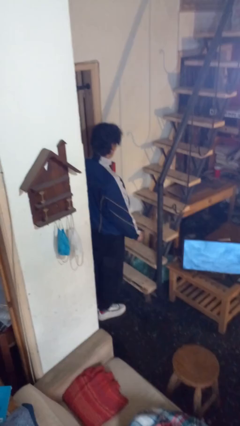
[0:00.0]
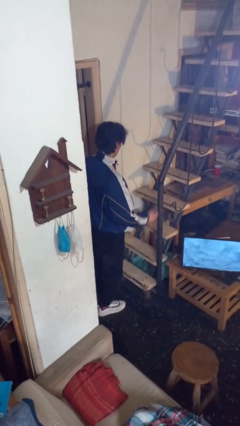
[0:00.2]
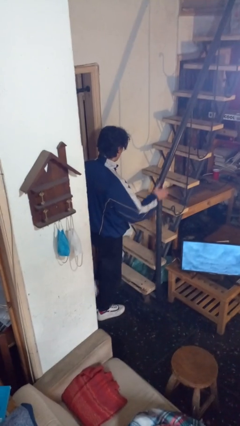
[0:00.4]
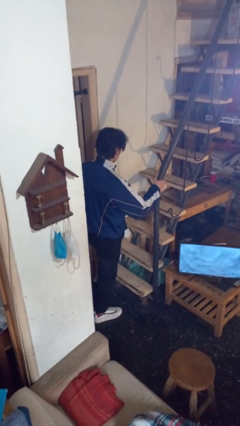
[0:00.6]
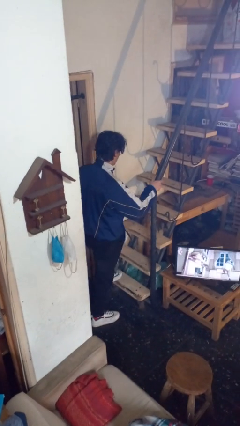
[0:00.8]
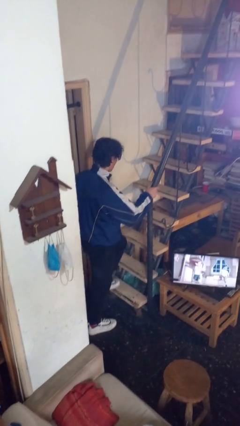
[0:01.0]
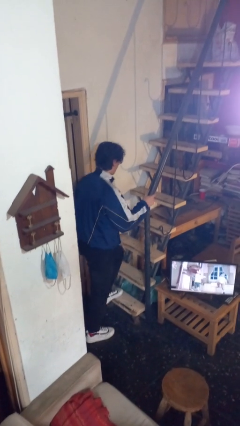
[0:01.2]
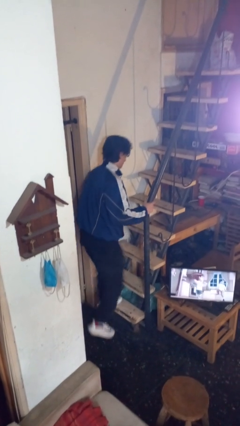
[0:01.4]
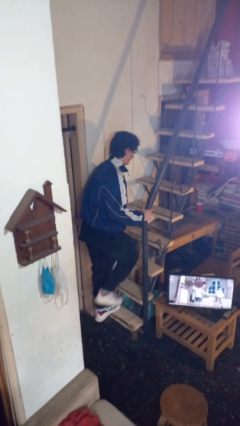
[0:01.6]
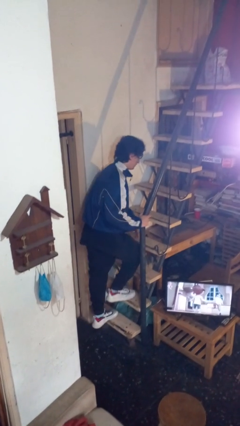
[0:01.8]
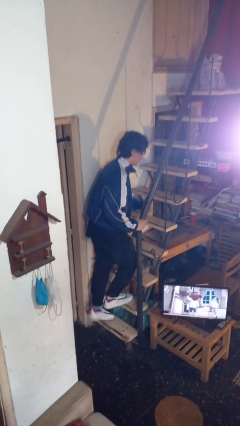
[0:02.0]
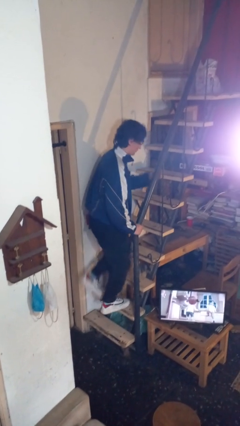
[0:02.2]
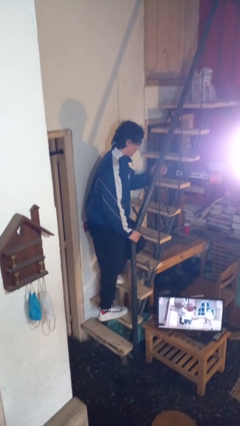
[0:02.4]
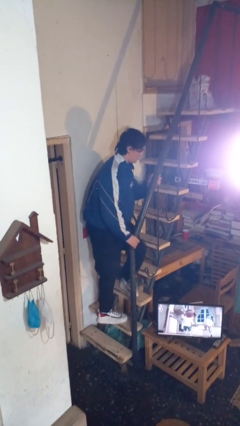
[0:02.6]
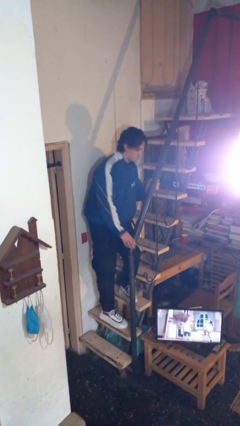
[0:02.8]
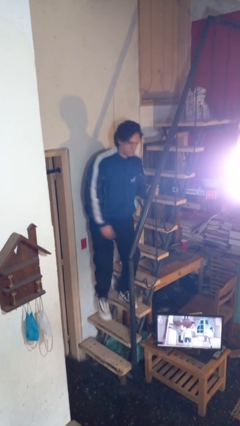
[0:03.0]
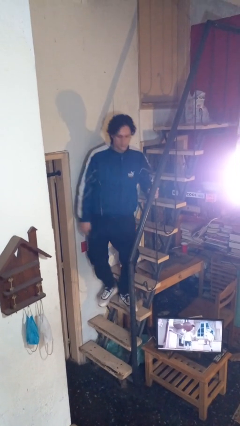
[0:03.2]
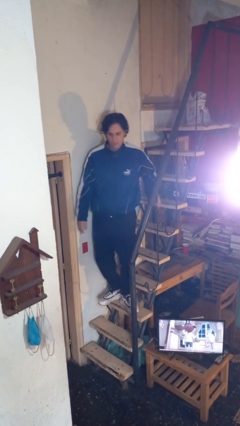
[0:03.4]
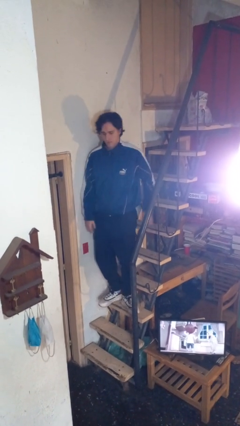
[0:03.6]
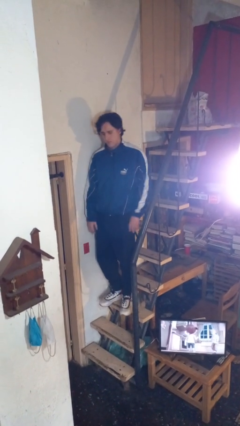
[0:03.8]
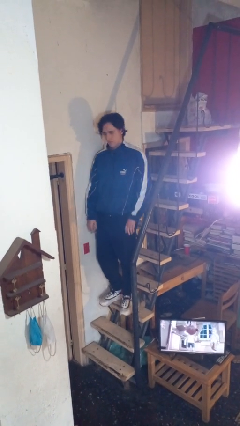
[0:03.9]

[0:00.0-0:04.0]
person climbs up stairs

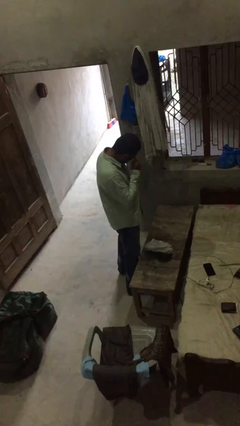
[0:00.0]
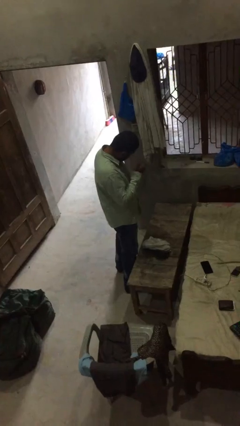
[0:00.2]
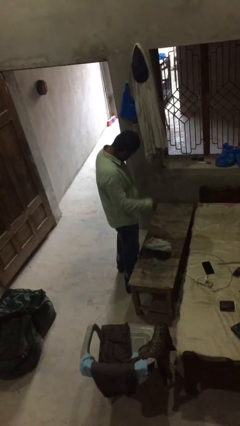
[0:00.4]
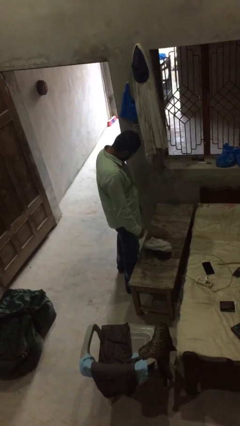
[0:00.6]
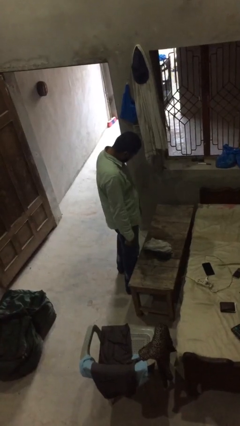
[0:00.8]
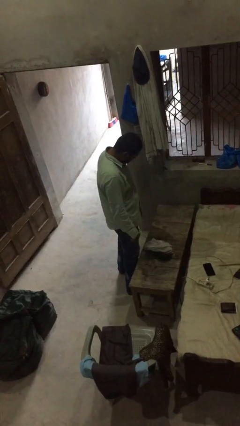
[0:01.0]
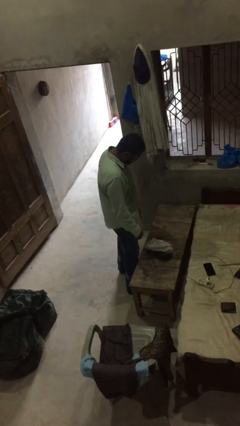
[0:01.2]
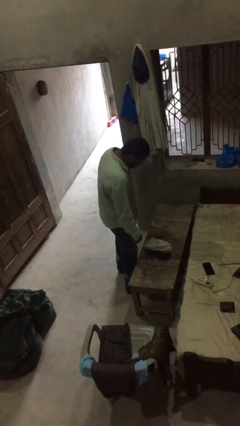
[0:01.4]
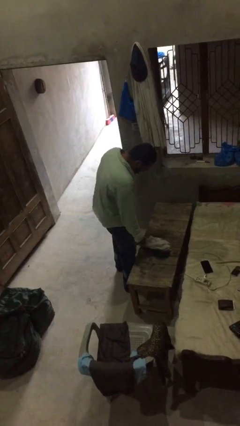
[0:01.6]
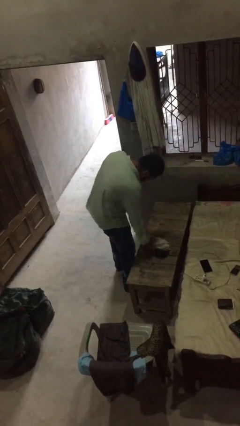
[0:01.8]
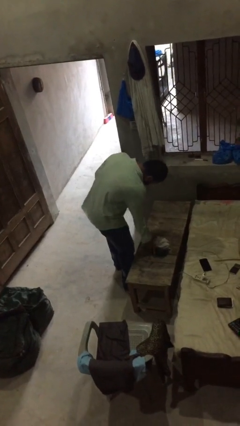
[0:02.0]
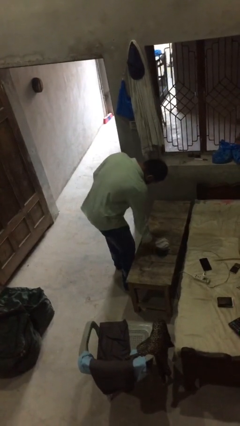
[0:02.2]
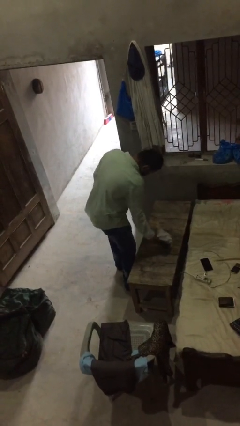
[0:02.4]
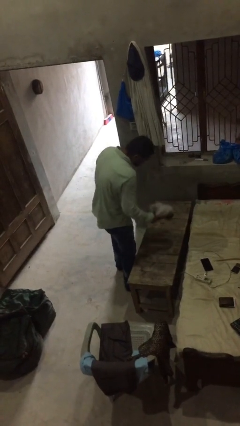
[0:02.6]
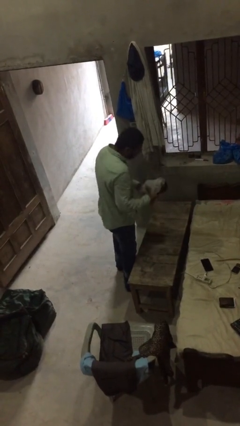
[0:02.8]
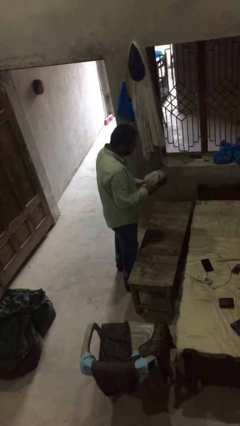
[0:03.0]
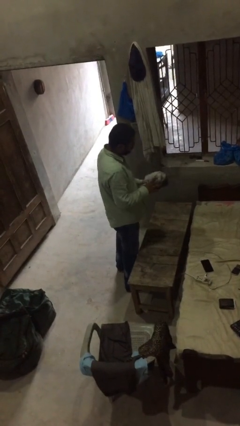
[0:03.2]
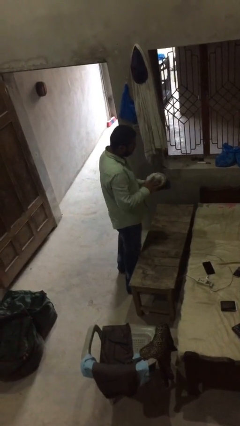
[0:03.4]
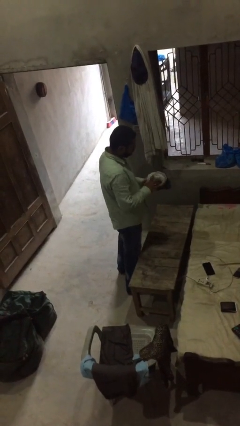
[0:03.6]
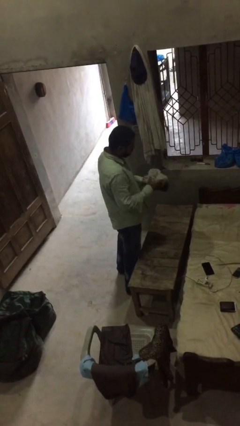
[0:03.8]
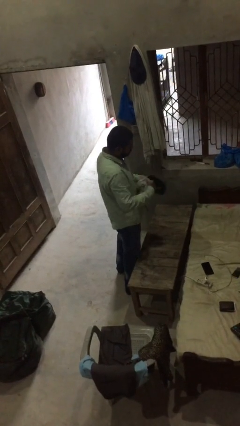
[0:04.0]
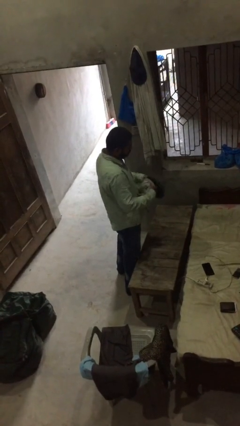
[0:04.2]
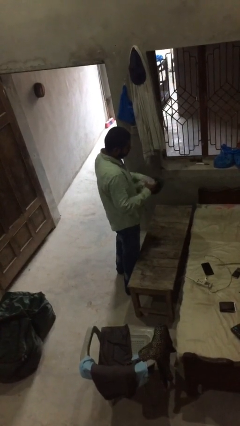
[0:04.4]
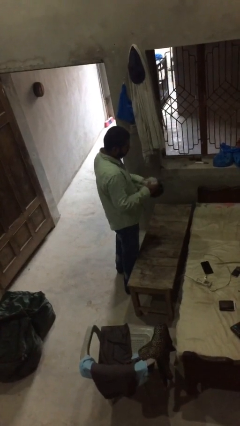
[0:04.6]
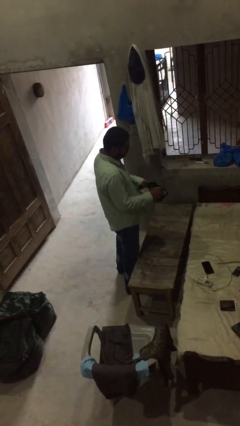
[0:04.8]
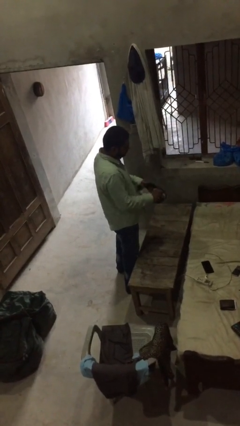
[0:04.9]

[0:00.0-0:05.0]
person picks up object from table

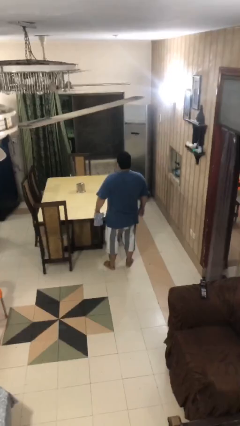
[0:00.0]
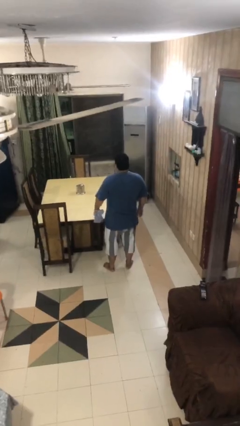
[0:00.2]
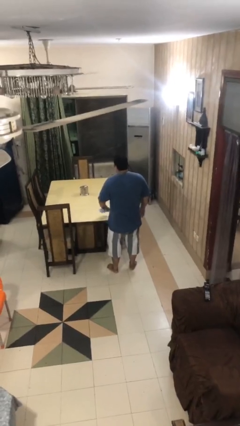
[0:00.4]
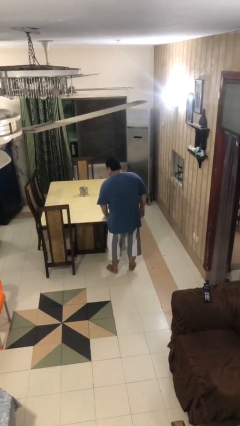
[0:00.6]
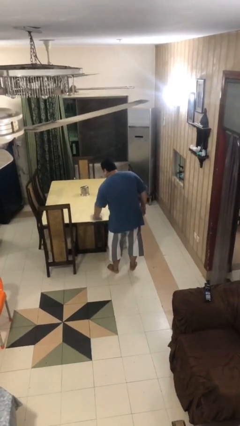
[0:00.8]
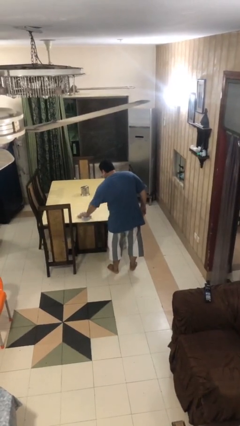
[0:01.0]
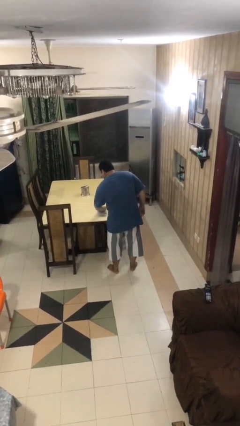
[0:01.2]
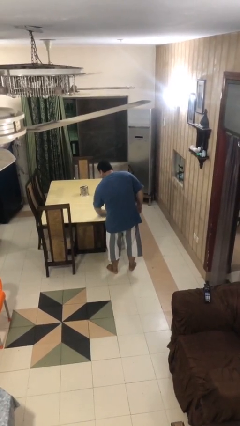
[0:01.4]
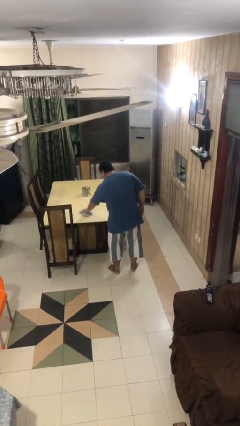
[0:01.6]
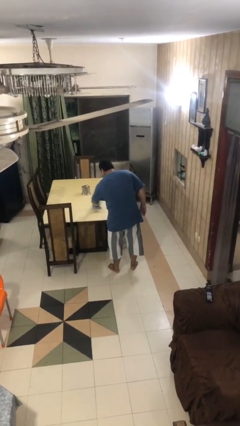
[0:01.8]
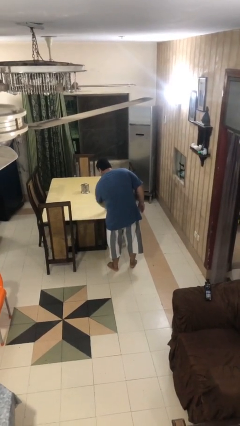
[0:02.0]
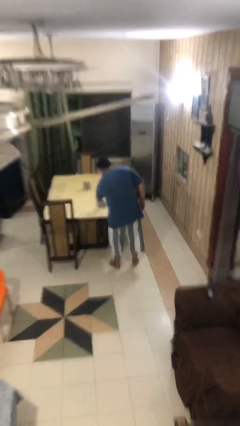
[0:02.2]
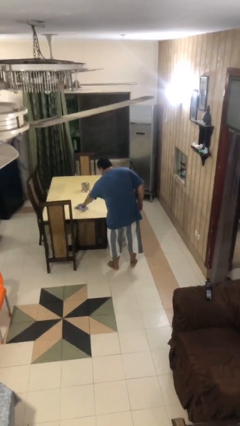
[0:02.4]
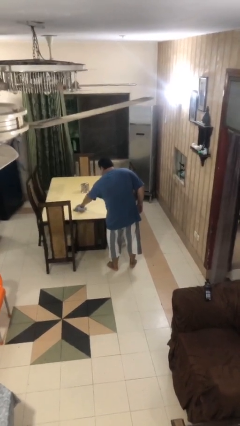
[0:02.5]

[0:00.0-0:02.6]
person cleans table with rag

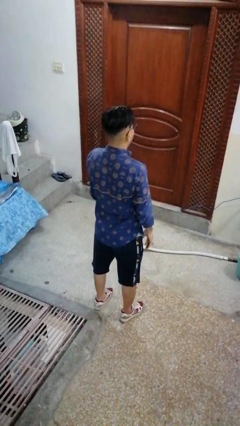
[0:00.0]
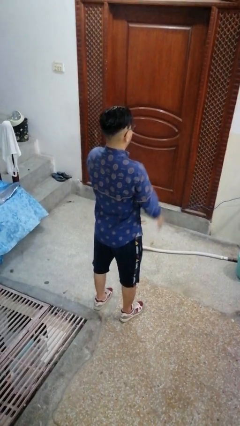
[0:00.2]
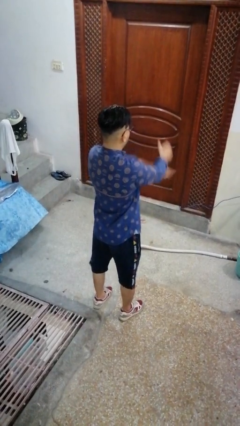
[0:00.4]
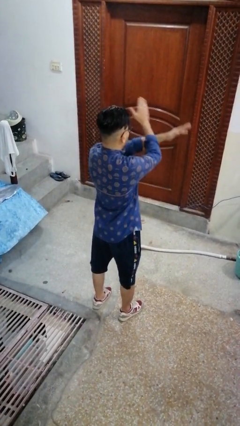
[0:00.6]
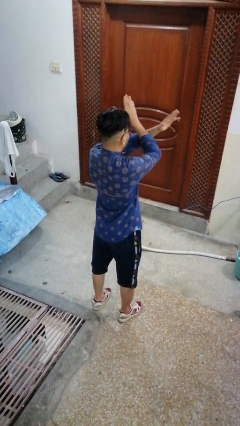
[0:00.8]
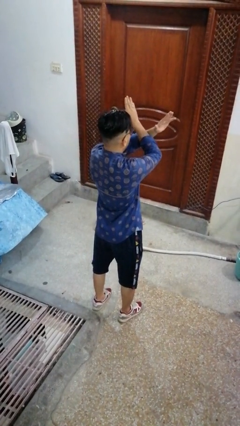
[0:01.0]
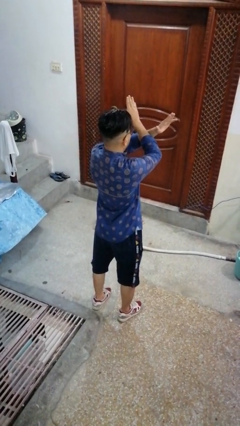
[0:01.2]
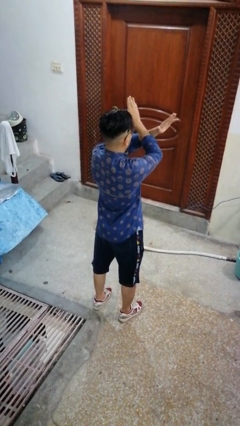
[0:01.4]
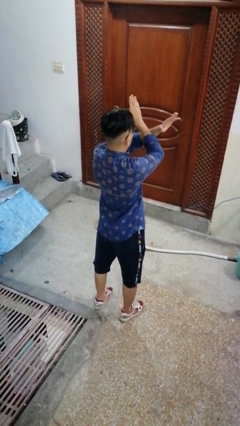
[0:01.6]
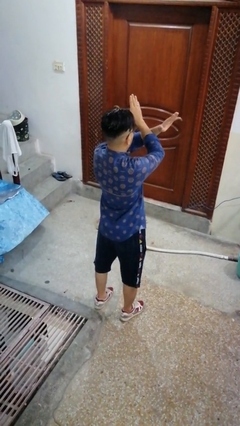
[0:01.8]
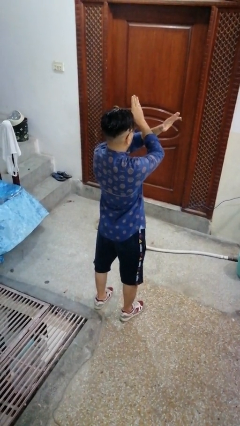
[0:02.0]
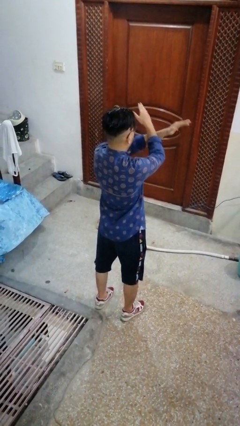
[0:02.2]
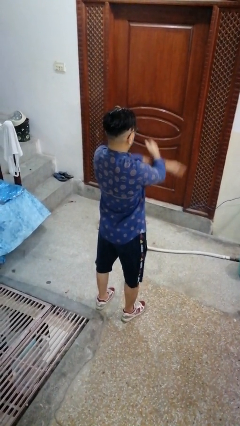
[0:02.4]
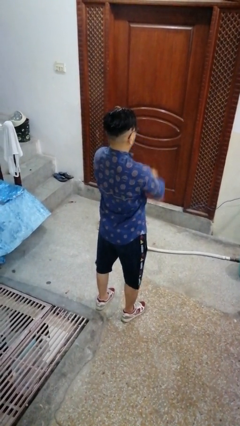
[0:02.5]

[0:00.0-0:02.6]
person gestures arms x

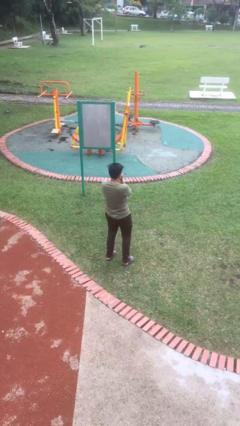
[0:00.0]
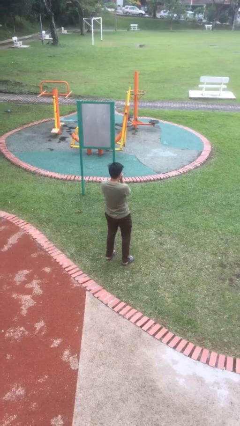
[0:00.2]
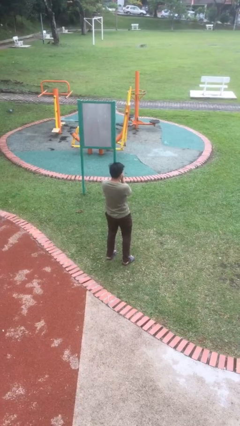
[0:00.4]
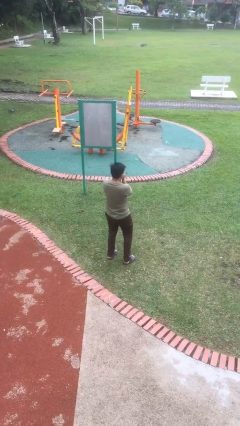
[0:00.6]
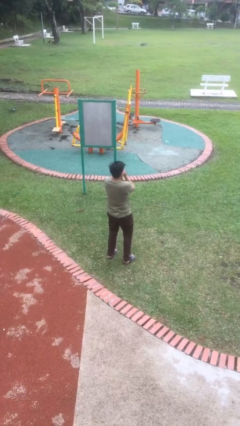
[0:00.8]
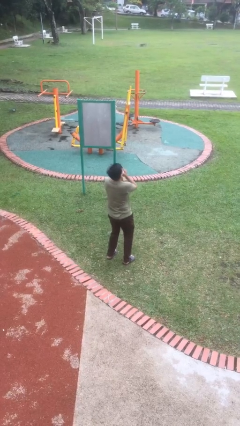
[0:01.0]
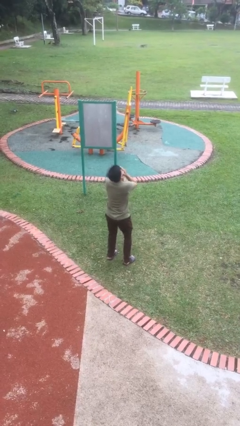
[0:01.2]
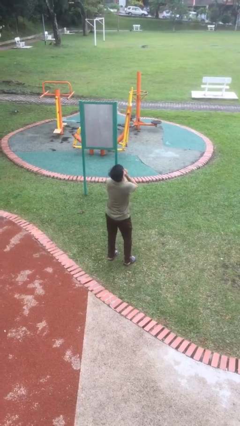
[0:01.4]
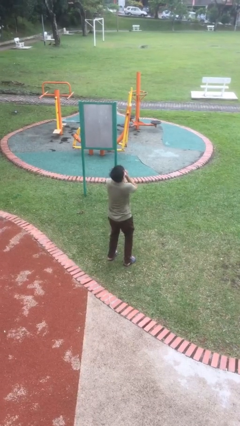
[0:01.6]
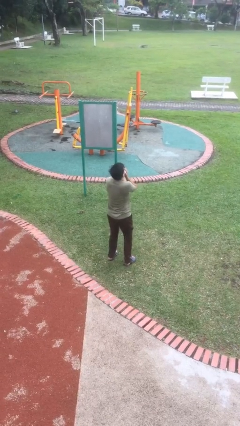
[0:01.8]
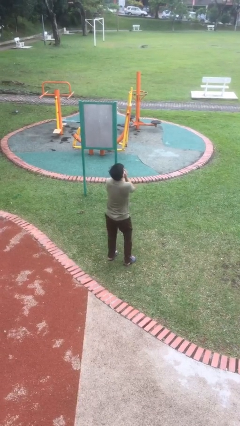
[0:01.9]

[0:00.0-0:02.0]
person wiggles hips

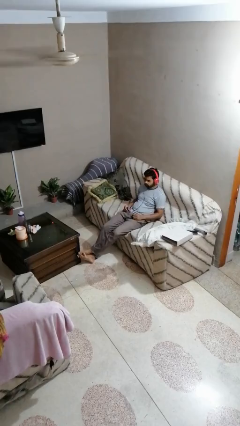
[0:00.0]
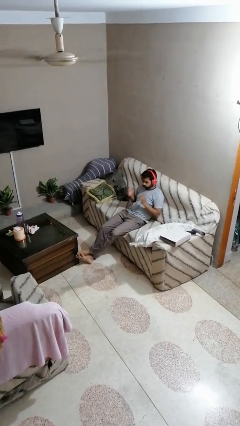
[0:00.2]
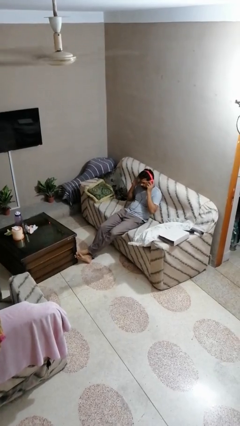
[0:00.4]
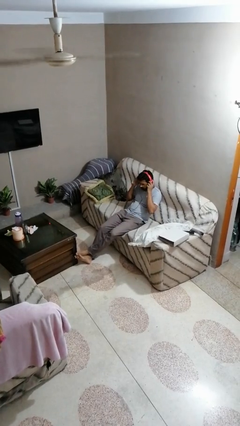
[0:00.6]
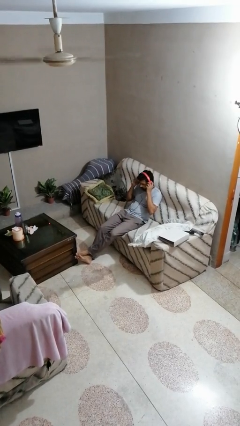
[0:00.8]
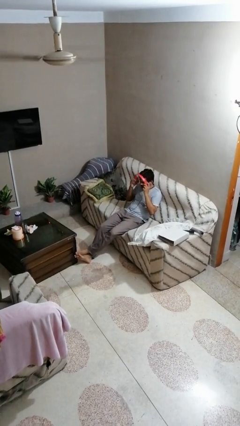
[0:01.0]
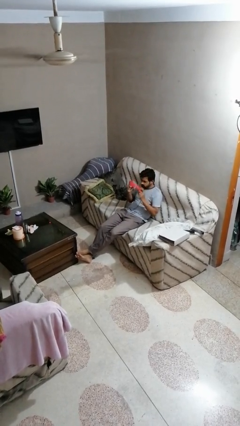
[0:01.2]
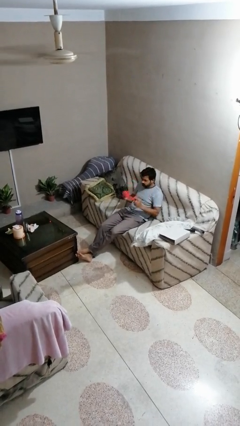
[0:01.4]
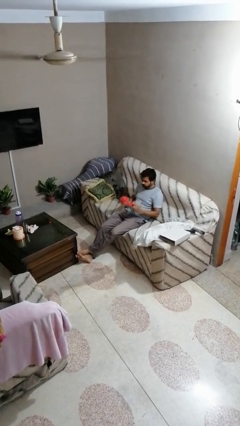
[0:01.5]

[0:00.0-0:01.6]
person takes off headphones
